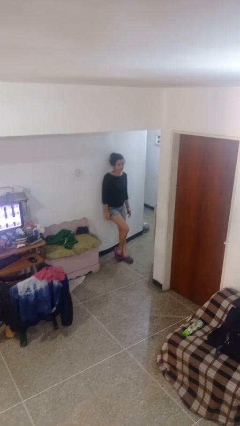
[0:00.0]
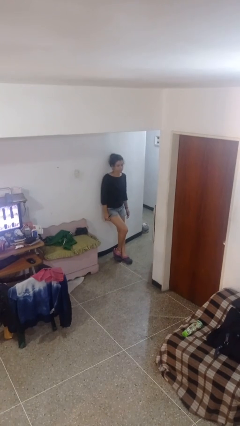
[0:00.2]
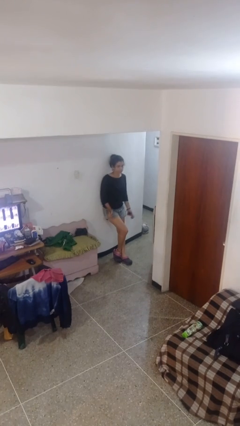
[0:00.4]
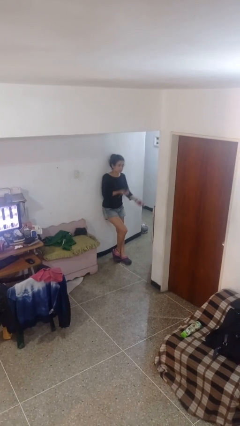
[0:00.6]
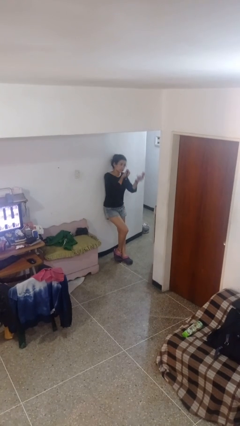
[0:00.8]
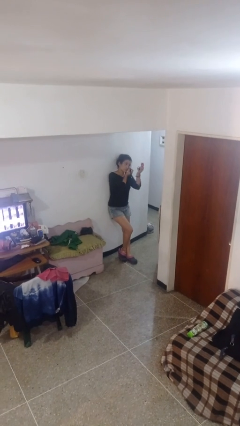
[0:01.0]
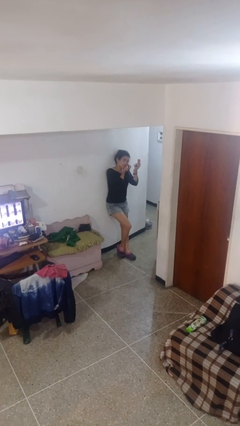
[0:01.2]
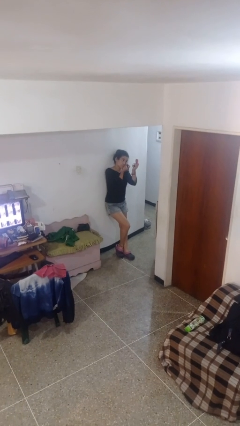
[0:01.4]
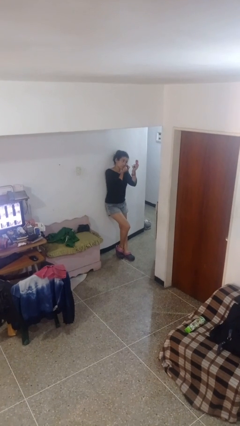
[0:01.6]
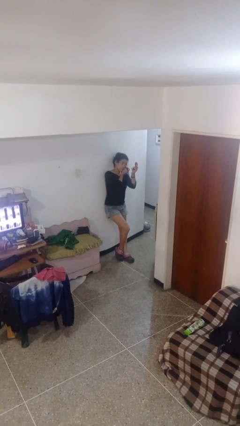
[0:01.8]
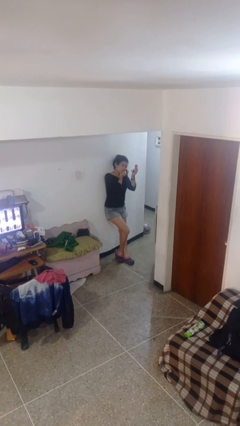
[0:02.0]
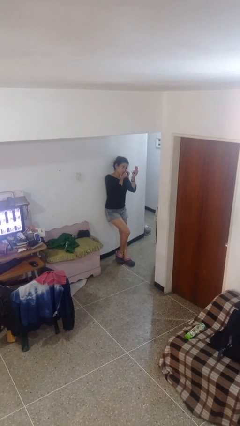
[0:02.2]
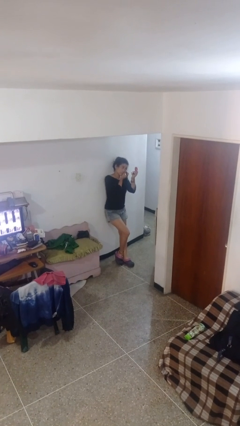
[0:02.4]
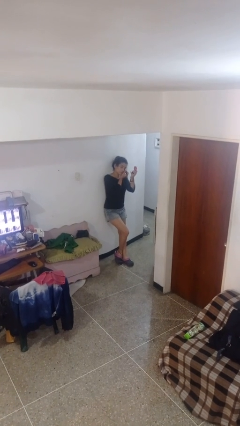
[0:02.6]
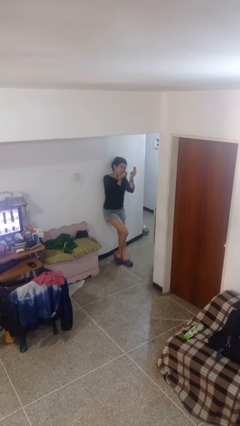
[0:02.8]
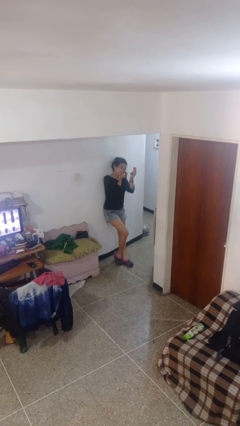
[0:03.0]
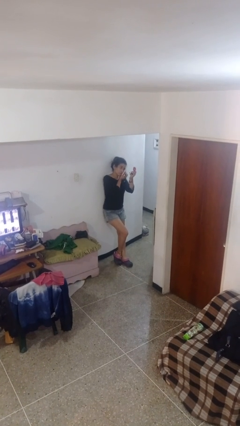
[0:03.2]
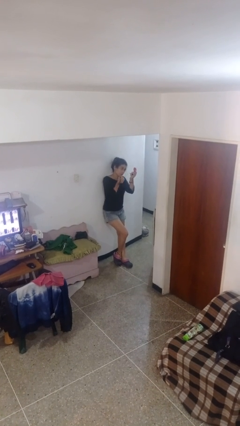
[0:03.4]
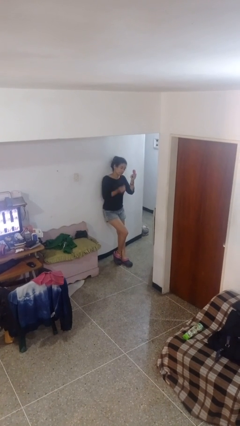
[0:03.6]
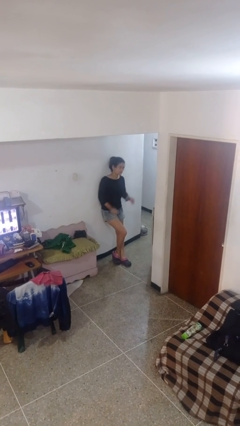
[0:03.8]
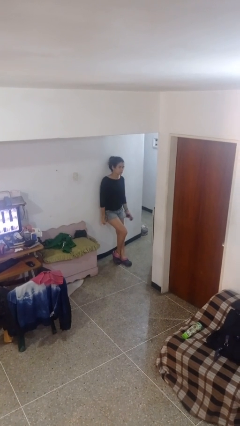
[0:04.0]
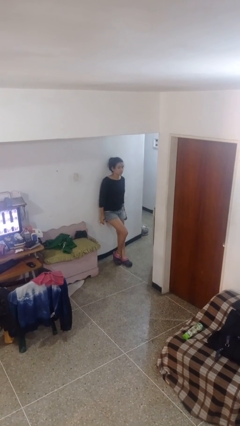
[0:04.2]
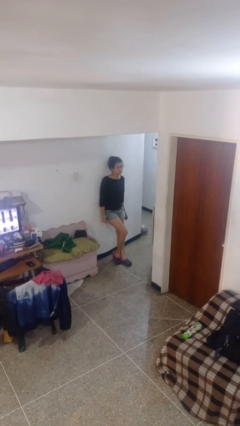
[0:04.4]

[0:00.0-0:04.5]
person applies eye makeup

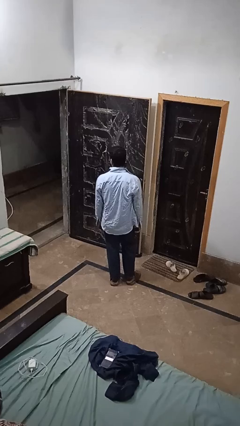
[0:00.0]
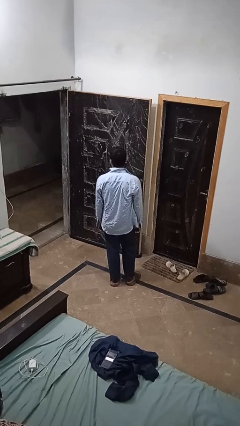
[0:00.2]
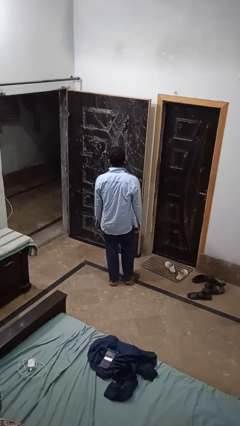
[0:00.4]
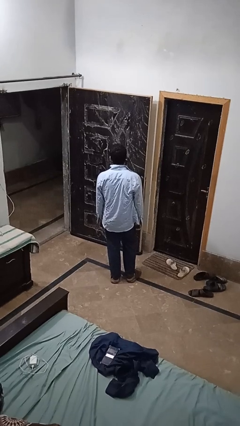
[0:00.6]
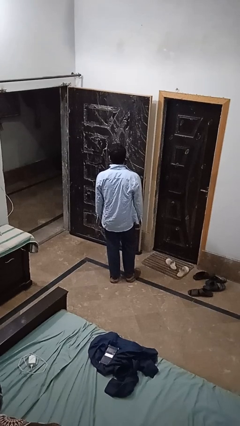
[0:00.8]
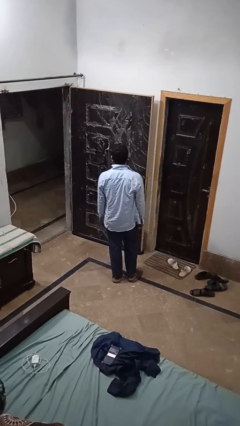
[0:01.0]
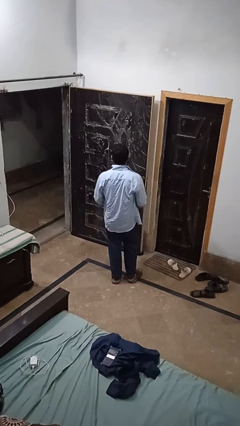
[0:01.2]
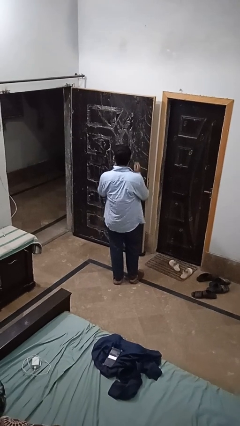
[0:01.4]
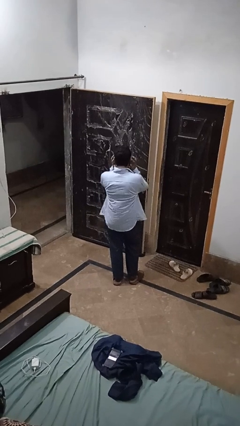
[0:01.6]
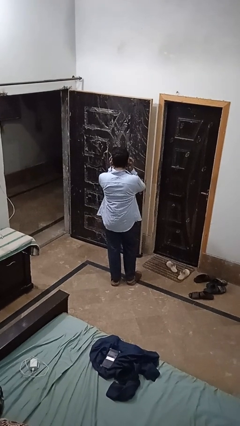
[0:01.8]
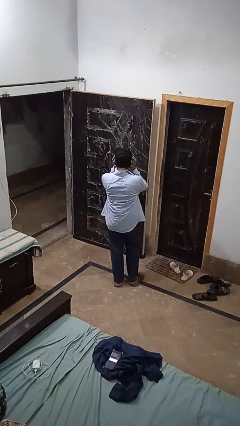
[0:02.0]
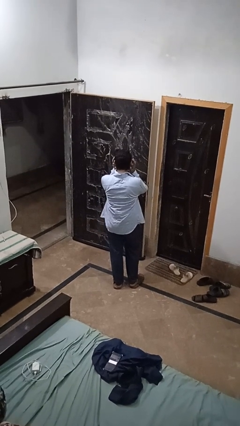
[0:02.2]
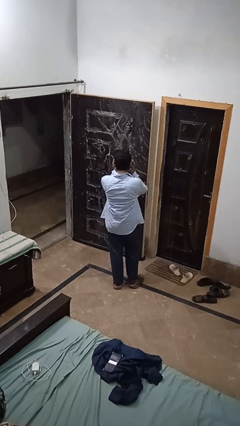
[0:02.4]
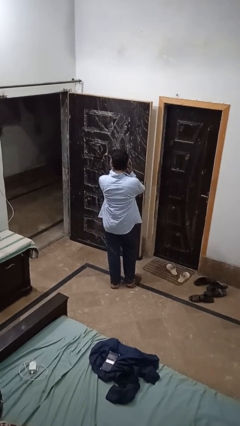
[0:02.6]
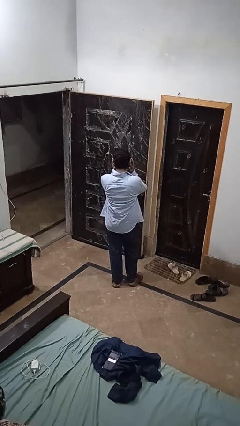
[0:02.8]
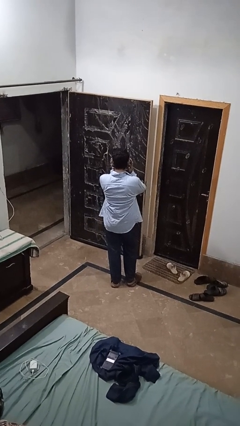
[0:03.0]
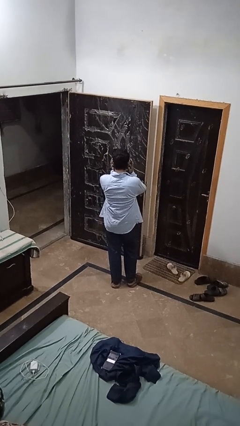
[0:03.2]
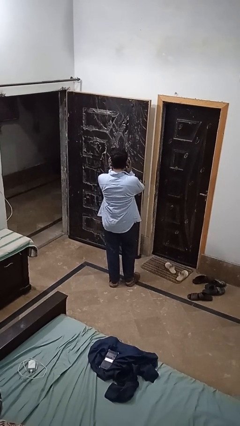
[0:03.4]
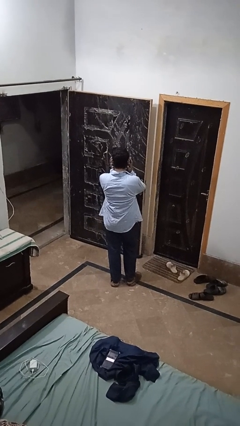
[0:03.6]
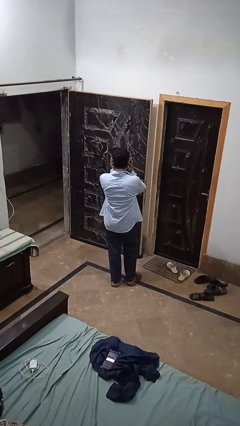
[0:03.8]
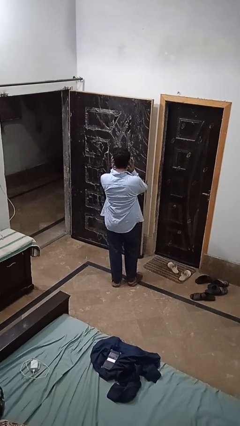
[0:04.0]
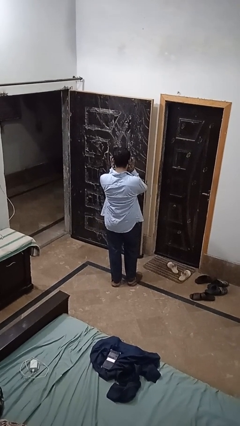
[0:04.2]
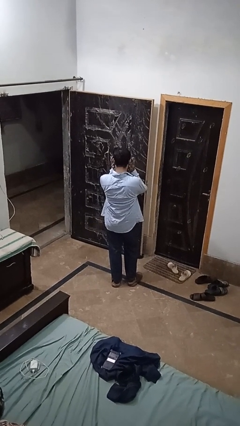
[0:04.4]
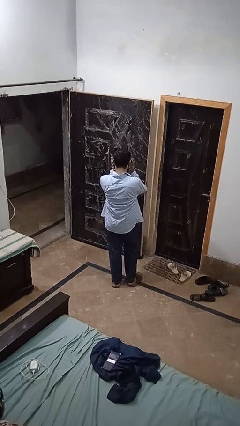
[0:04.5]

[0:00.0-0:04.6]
person puts fingers in ear

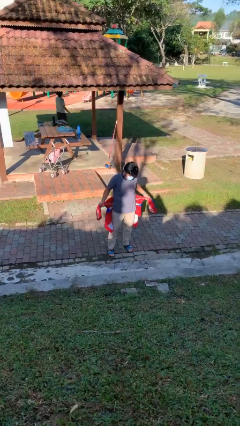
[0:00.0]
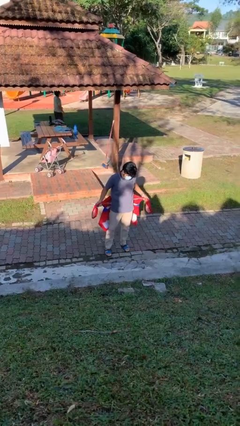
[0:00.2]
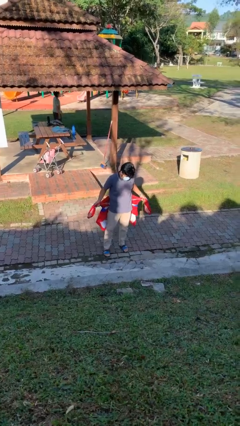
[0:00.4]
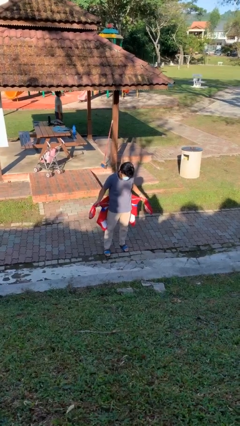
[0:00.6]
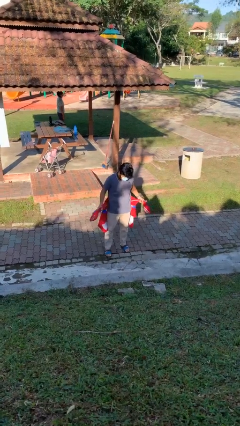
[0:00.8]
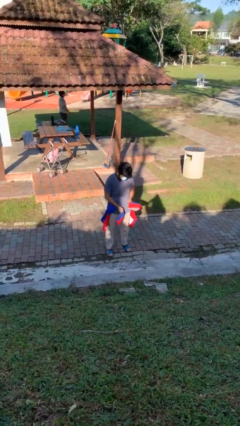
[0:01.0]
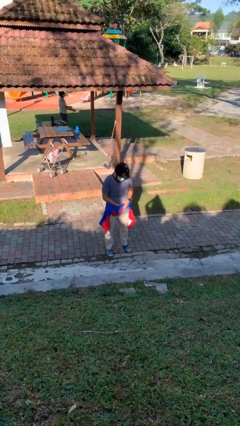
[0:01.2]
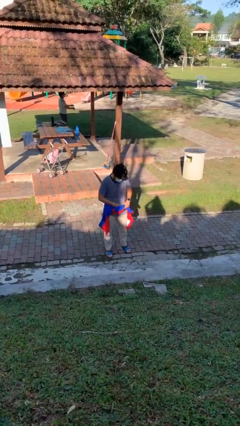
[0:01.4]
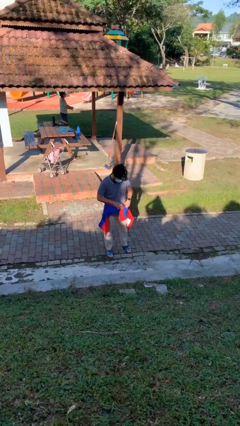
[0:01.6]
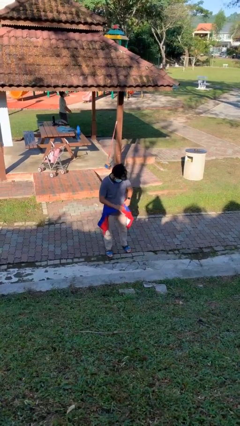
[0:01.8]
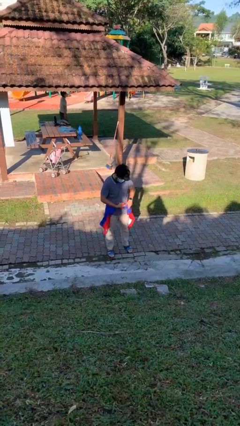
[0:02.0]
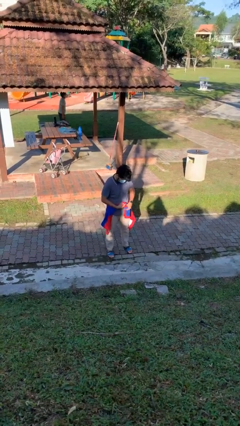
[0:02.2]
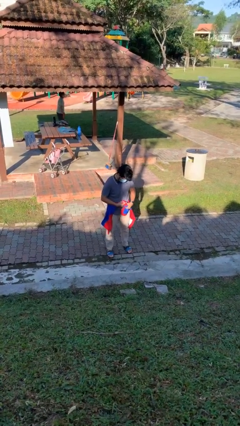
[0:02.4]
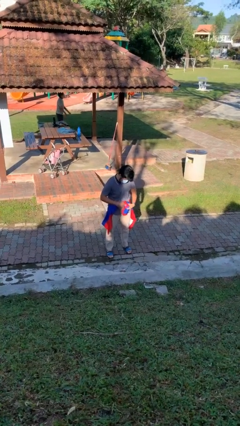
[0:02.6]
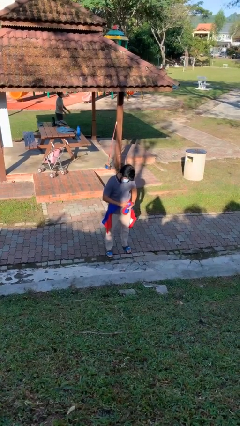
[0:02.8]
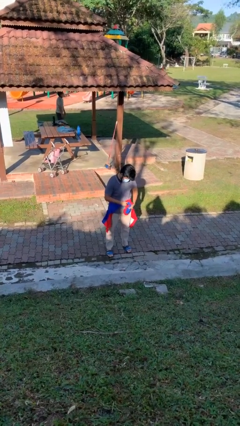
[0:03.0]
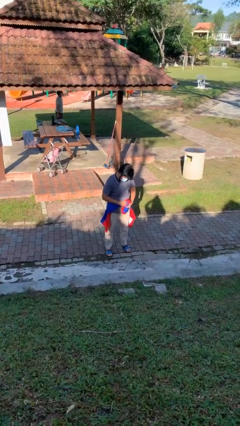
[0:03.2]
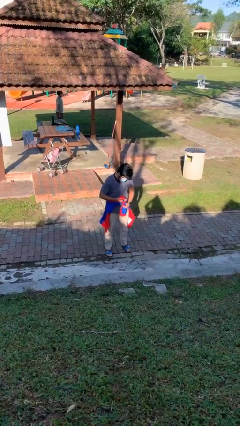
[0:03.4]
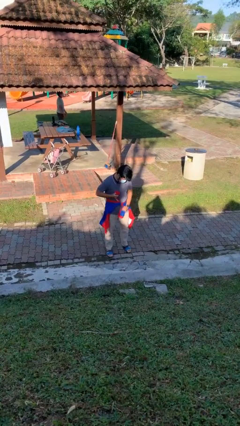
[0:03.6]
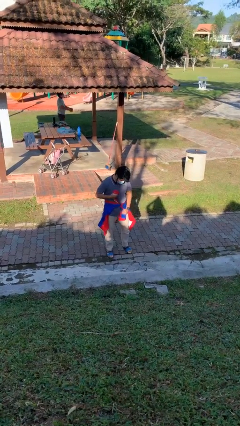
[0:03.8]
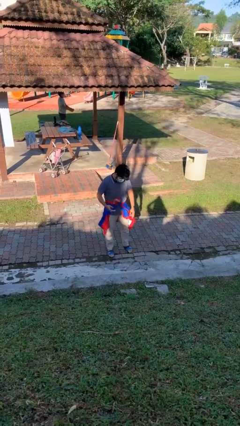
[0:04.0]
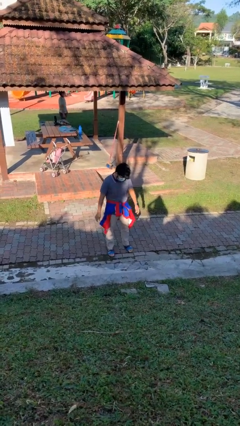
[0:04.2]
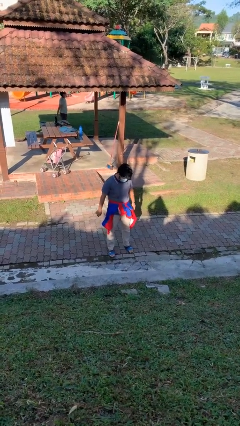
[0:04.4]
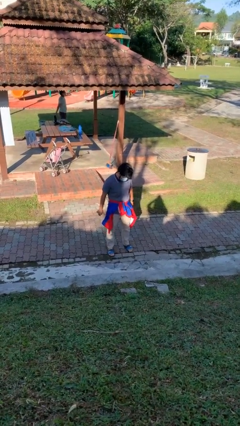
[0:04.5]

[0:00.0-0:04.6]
person ties jacket around waist

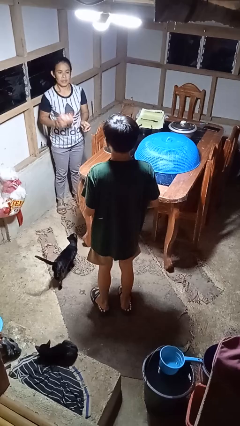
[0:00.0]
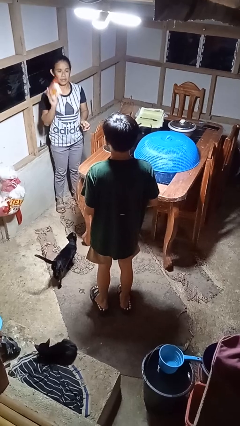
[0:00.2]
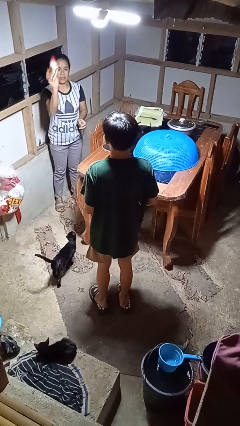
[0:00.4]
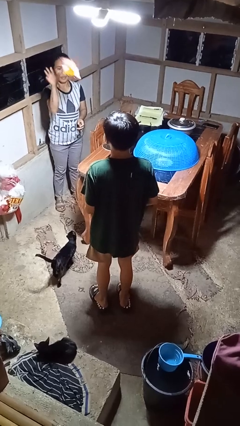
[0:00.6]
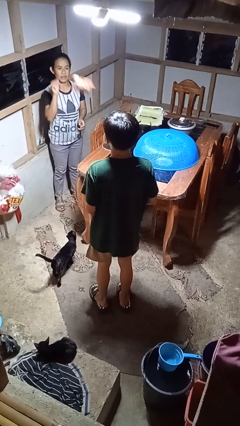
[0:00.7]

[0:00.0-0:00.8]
person catches object from person

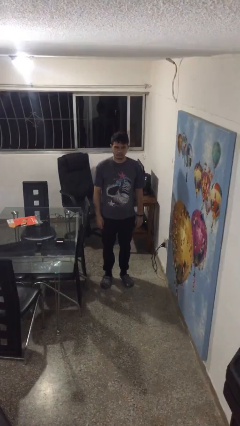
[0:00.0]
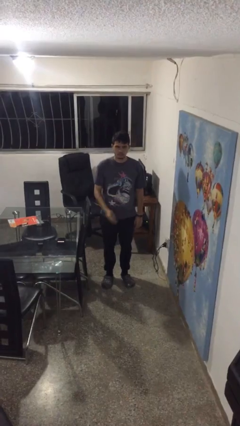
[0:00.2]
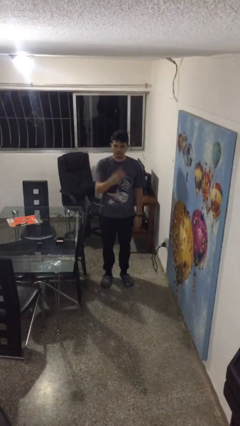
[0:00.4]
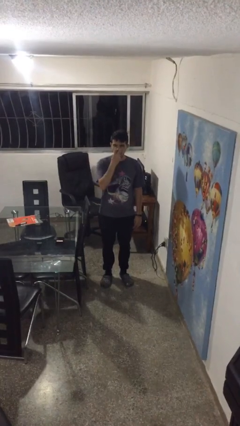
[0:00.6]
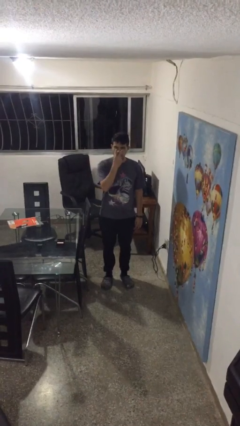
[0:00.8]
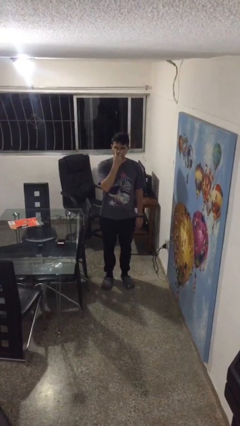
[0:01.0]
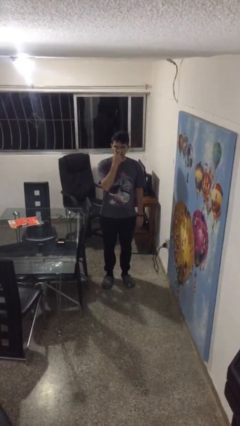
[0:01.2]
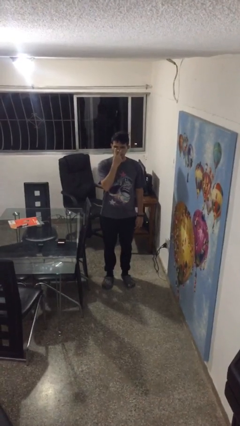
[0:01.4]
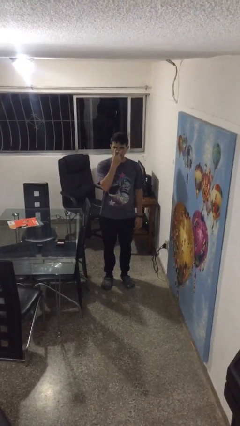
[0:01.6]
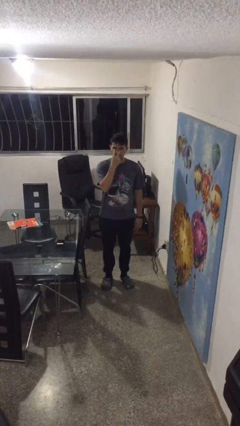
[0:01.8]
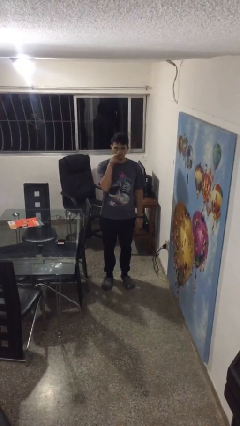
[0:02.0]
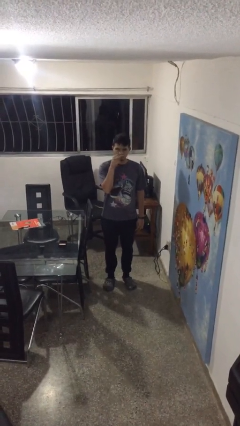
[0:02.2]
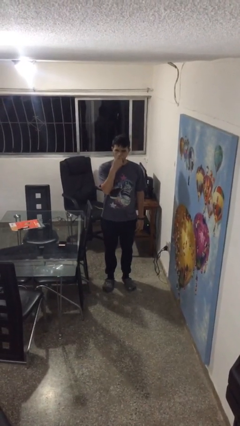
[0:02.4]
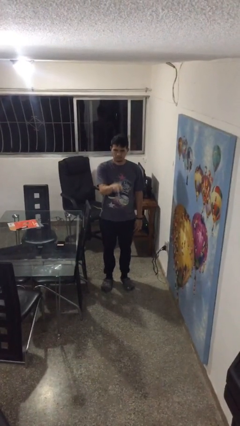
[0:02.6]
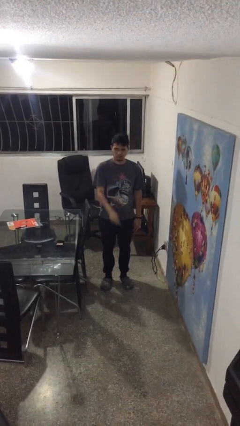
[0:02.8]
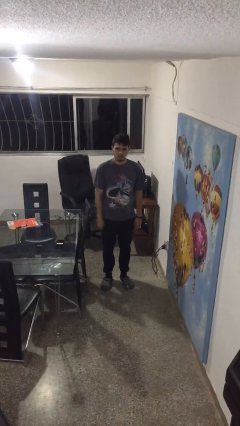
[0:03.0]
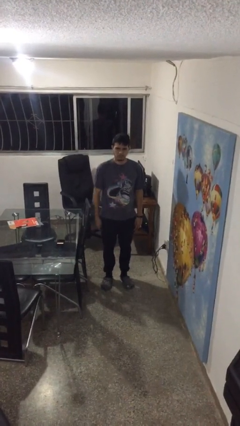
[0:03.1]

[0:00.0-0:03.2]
person gestures watch closely
